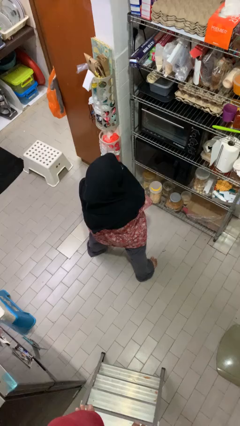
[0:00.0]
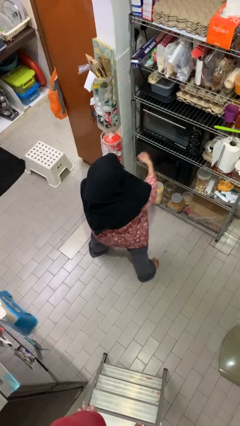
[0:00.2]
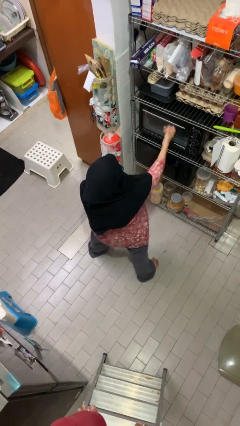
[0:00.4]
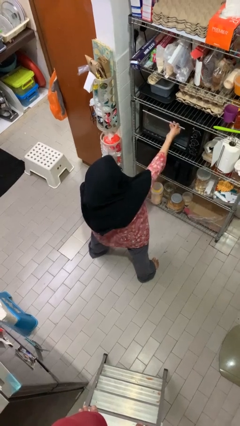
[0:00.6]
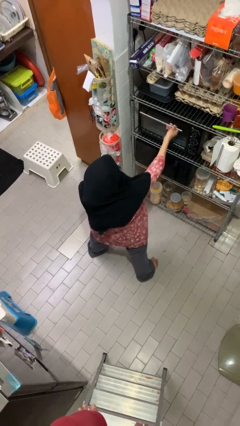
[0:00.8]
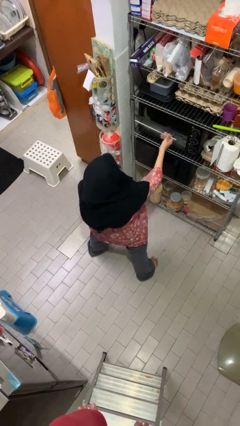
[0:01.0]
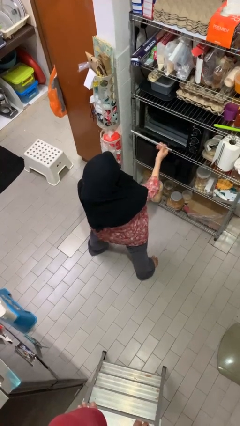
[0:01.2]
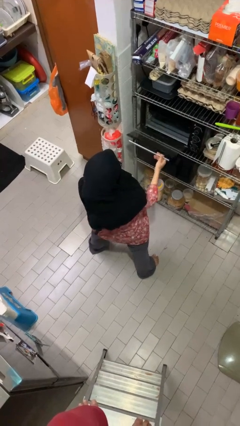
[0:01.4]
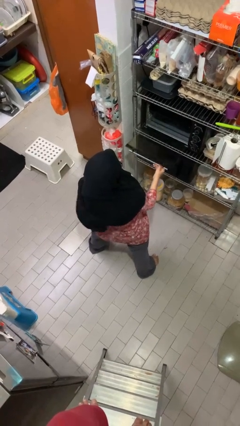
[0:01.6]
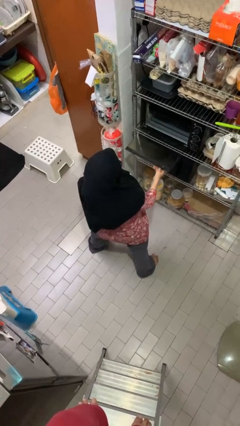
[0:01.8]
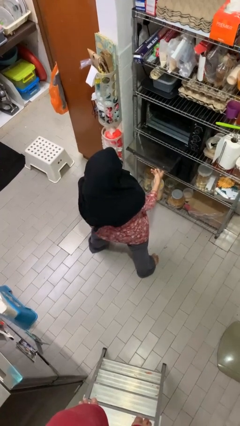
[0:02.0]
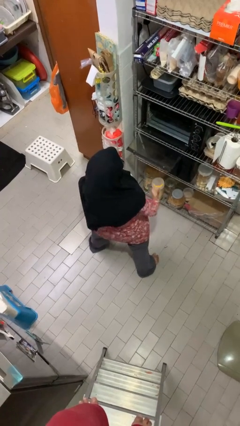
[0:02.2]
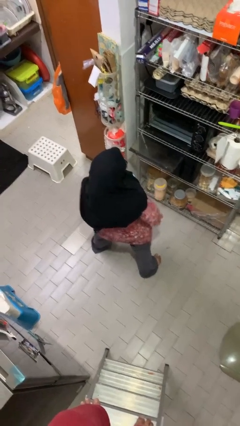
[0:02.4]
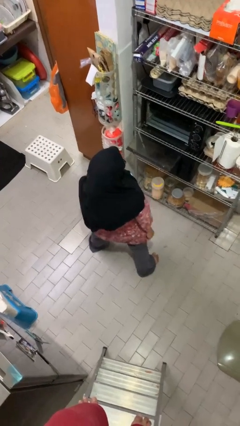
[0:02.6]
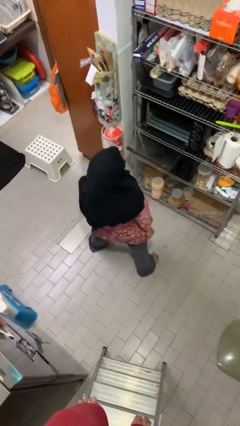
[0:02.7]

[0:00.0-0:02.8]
person opens oven door

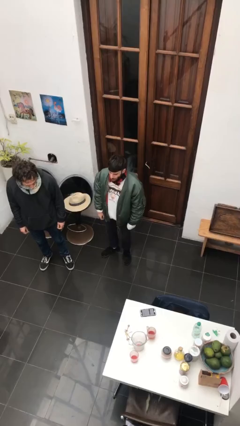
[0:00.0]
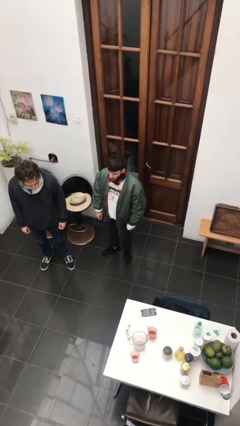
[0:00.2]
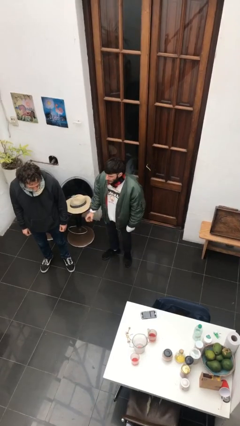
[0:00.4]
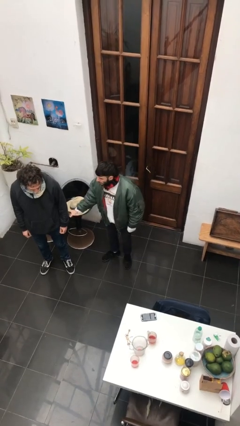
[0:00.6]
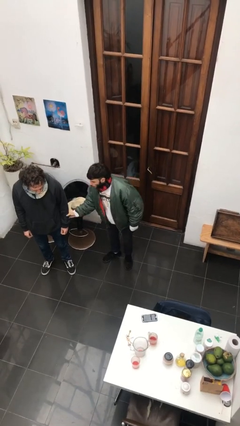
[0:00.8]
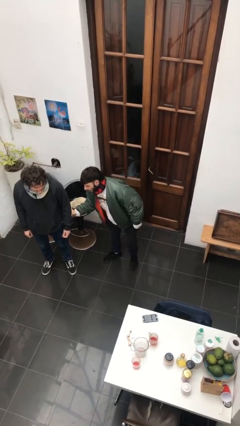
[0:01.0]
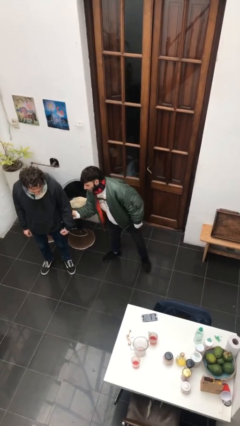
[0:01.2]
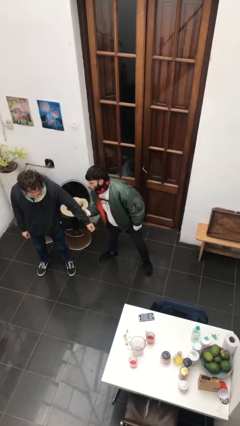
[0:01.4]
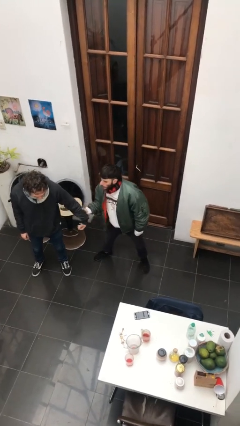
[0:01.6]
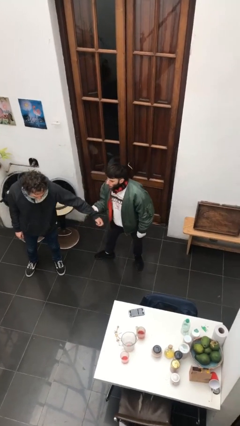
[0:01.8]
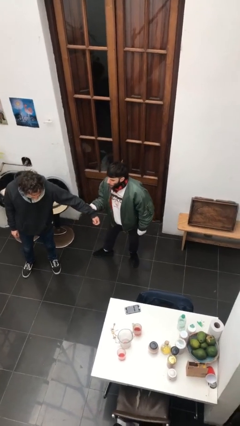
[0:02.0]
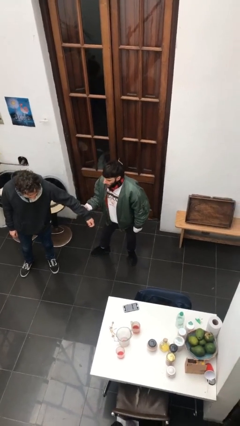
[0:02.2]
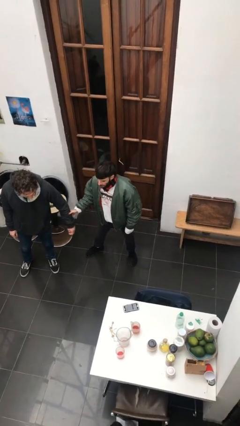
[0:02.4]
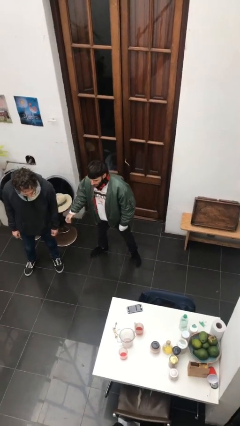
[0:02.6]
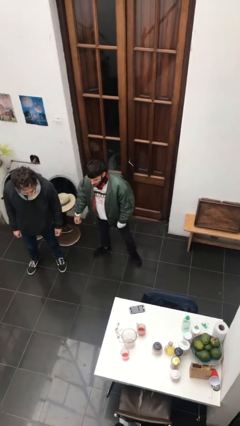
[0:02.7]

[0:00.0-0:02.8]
person grabs person by forearm

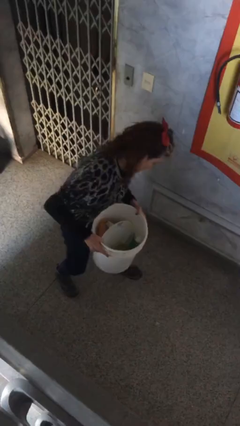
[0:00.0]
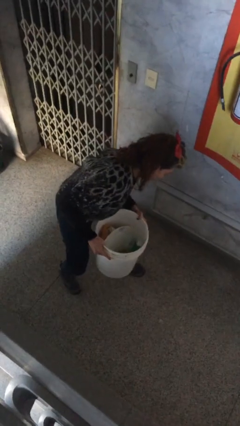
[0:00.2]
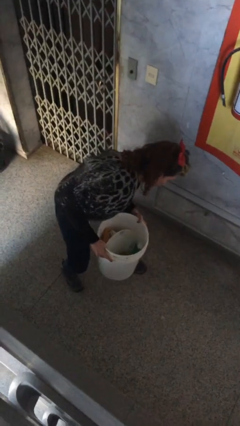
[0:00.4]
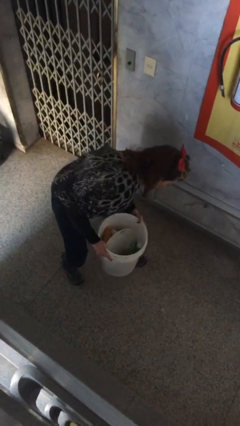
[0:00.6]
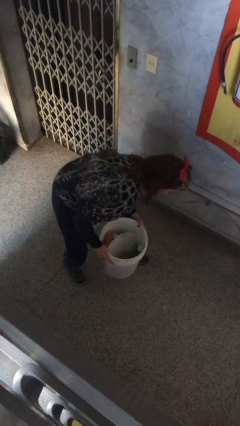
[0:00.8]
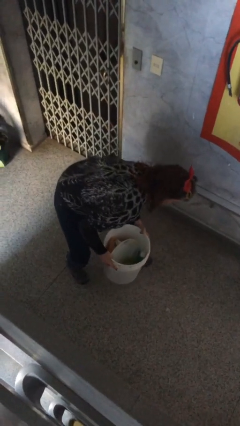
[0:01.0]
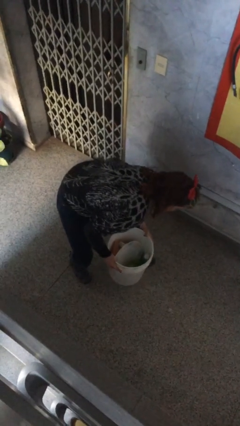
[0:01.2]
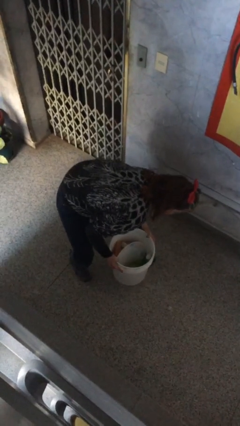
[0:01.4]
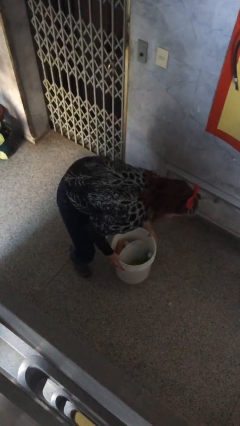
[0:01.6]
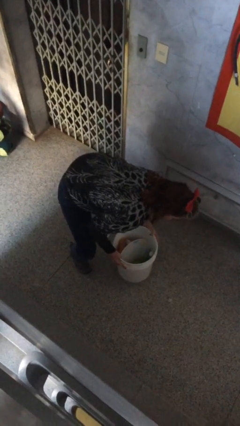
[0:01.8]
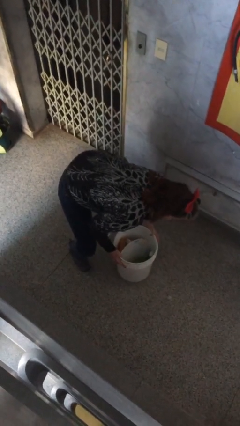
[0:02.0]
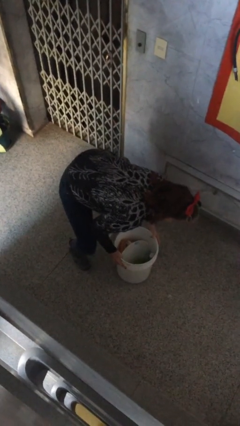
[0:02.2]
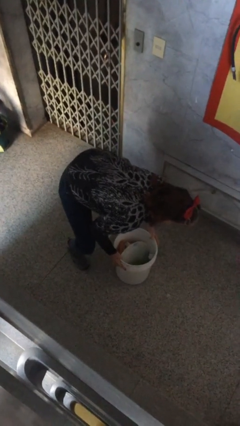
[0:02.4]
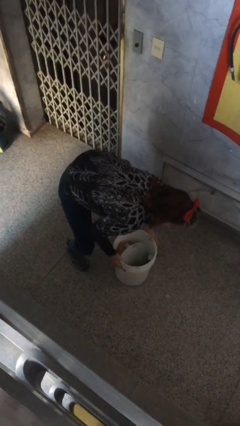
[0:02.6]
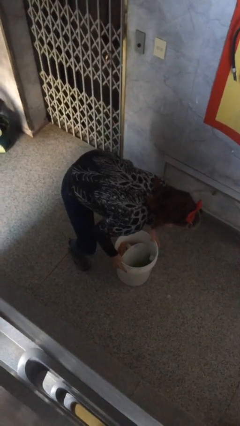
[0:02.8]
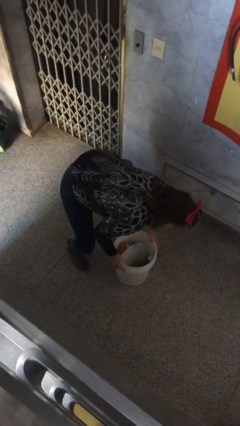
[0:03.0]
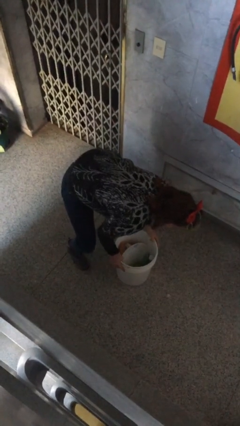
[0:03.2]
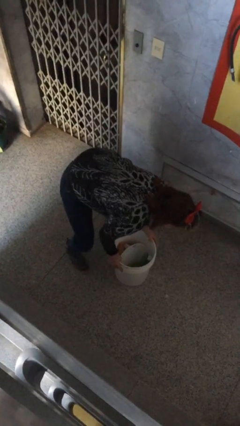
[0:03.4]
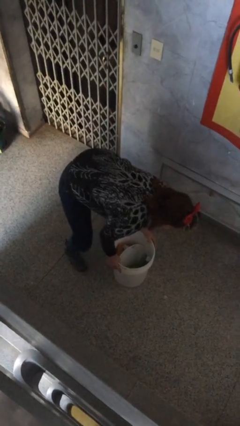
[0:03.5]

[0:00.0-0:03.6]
person puts down object on floor

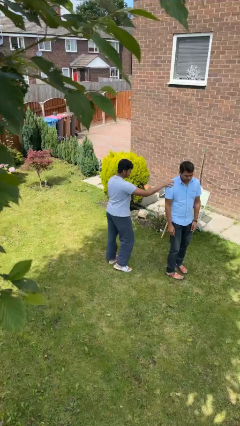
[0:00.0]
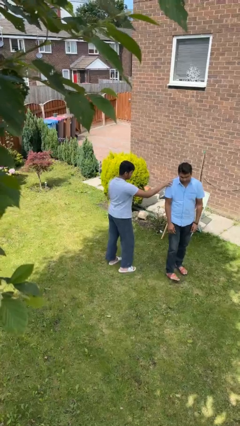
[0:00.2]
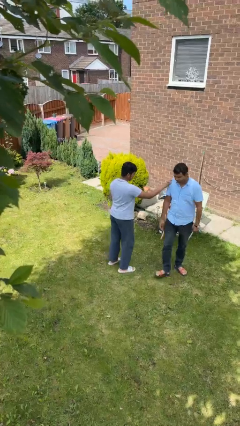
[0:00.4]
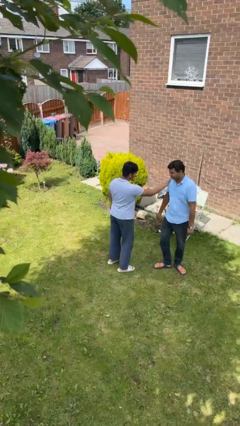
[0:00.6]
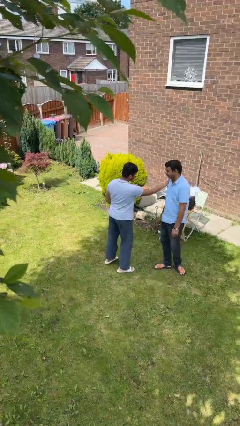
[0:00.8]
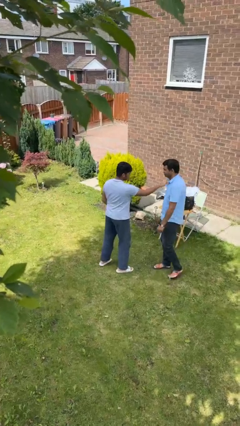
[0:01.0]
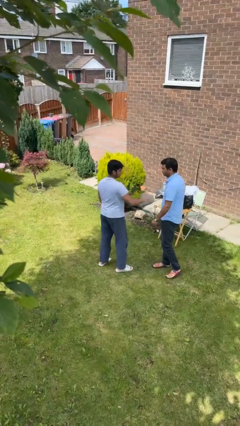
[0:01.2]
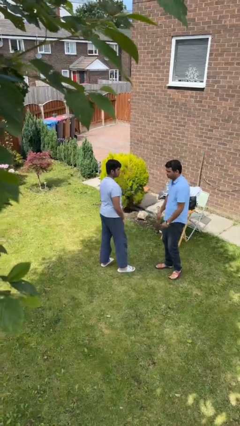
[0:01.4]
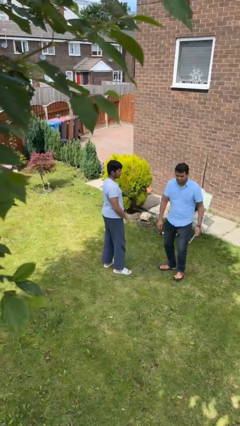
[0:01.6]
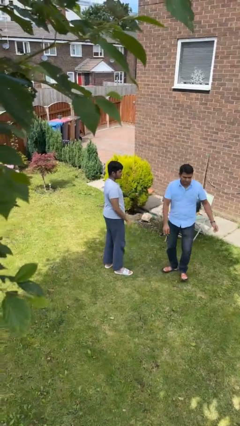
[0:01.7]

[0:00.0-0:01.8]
person spins person around

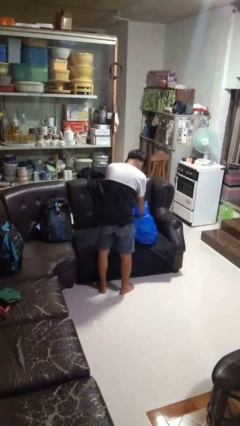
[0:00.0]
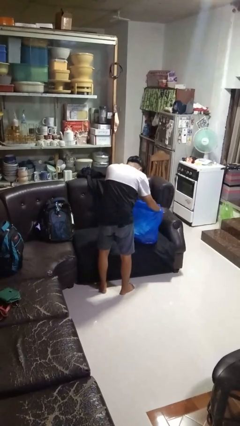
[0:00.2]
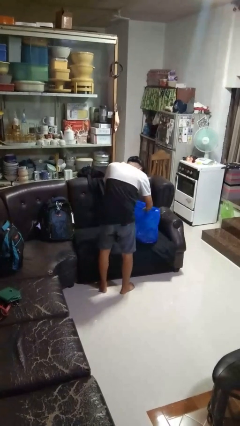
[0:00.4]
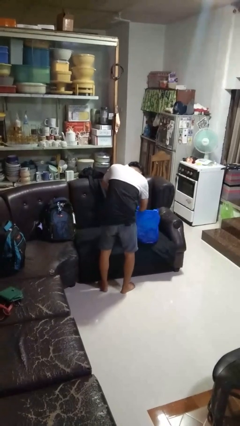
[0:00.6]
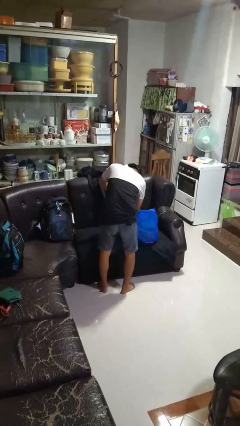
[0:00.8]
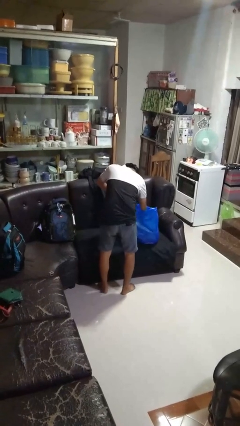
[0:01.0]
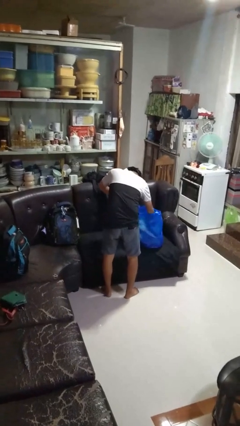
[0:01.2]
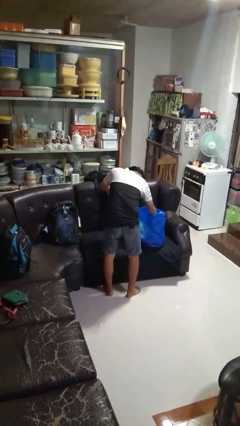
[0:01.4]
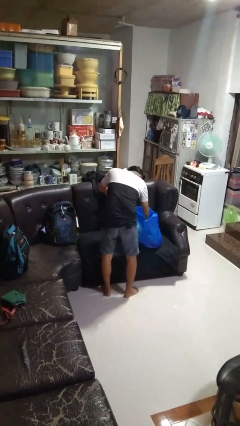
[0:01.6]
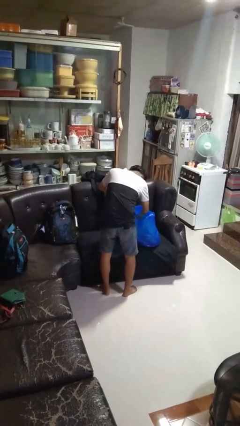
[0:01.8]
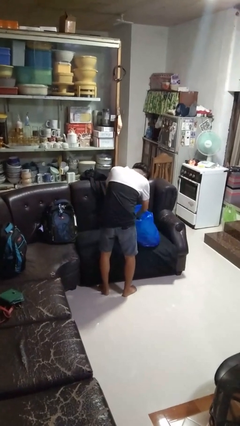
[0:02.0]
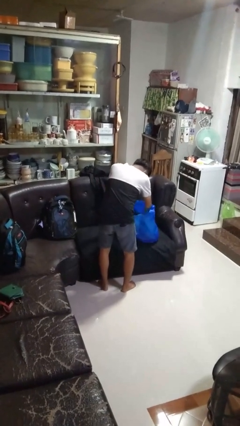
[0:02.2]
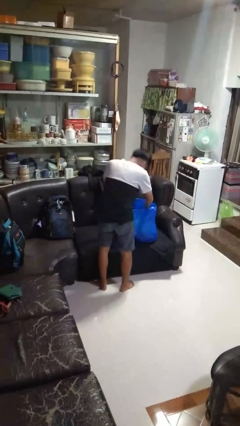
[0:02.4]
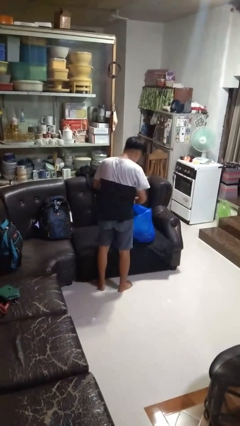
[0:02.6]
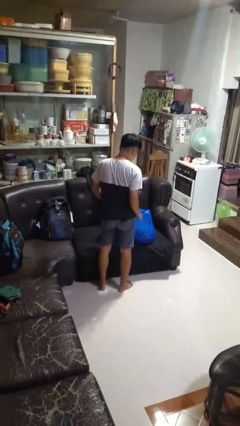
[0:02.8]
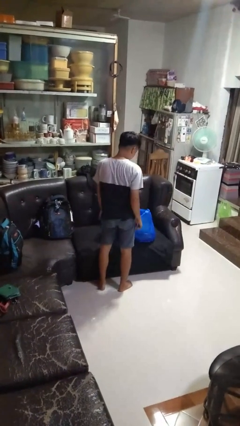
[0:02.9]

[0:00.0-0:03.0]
person searches in bag

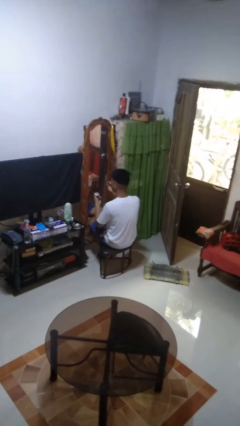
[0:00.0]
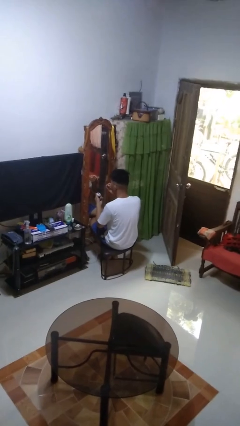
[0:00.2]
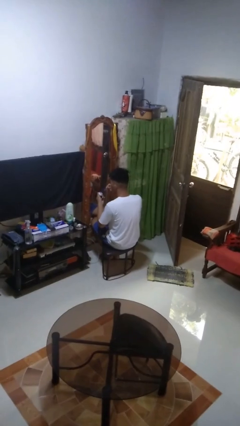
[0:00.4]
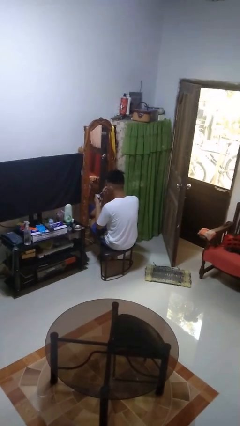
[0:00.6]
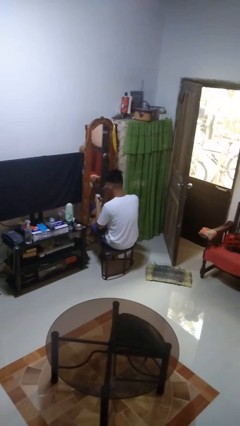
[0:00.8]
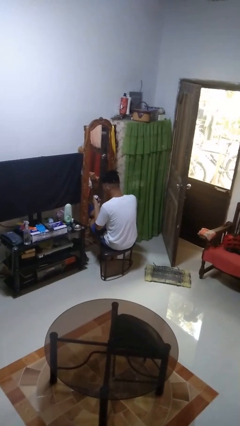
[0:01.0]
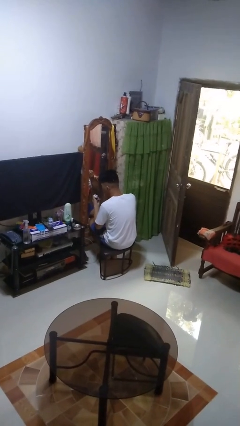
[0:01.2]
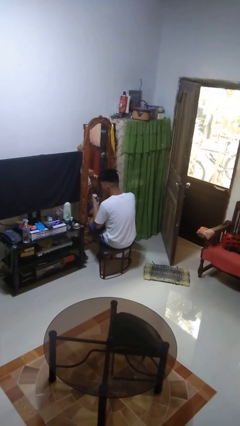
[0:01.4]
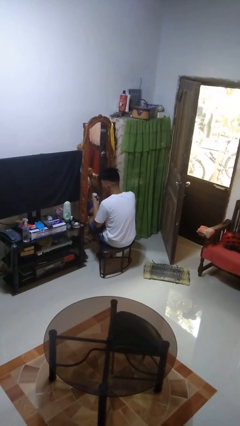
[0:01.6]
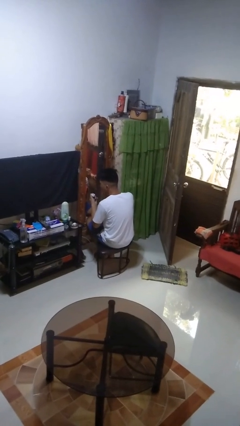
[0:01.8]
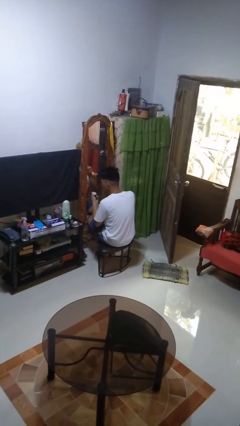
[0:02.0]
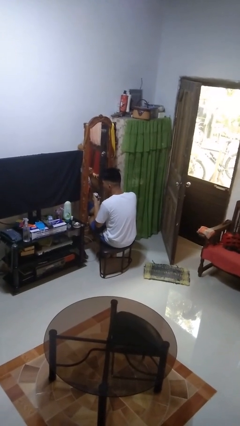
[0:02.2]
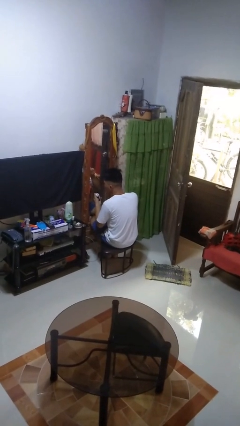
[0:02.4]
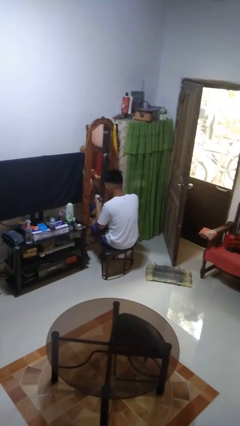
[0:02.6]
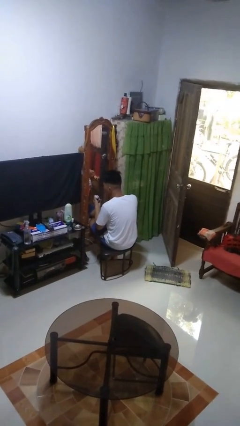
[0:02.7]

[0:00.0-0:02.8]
person applies eye makeup

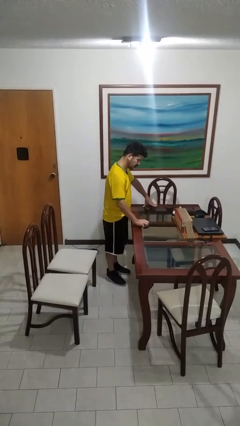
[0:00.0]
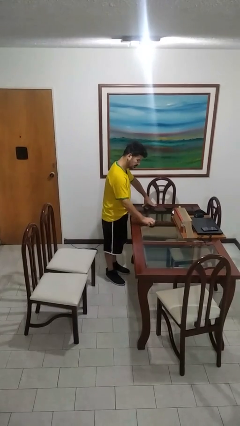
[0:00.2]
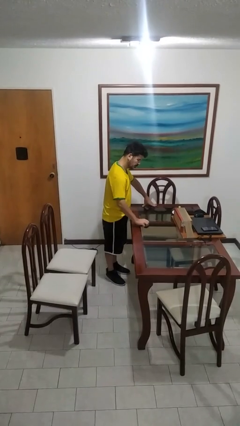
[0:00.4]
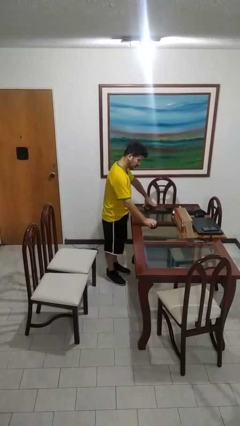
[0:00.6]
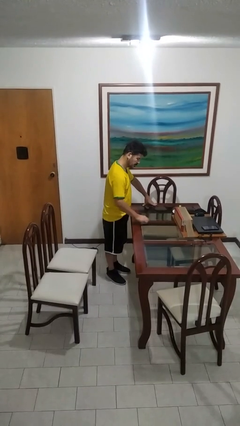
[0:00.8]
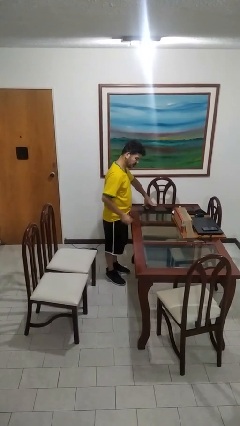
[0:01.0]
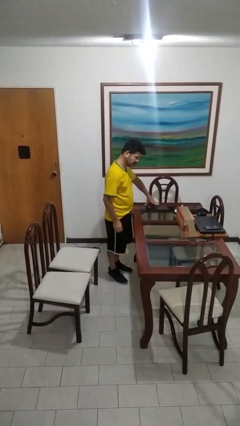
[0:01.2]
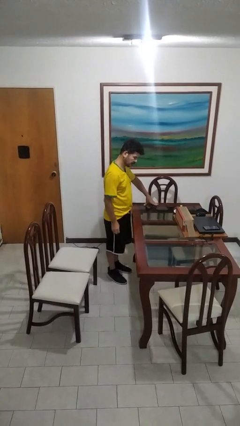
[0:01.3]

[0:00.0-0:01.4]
person cleans table with rag
